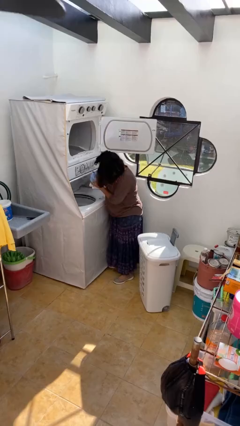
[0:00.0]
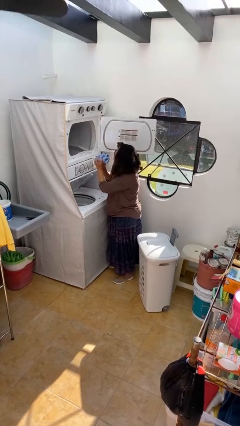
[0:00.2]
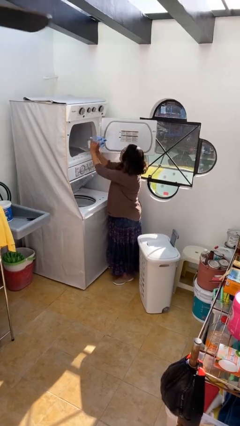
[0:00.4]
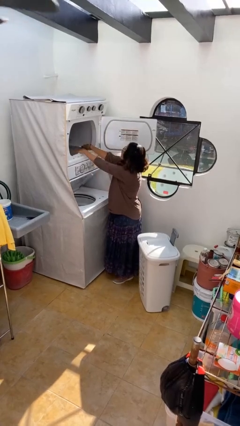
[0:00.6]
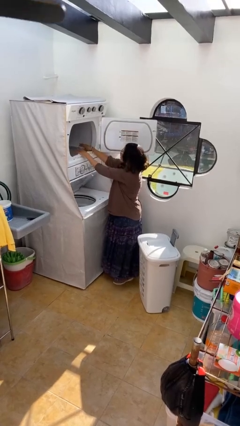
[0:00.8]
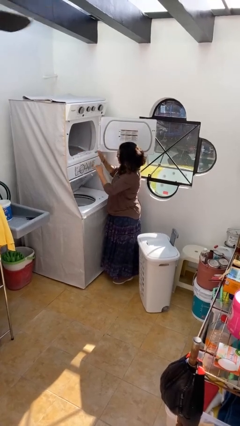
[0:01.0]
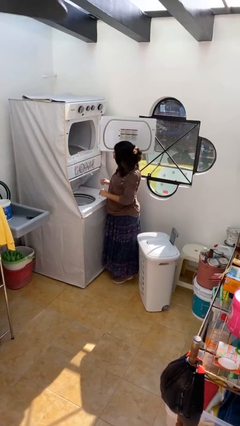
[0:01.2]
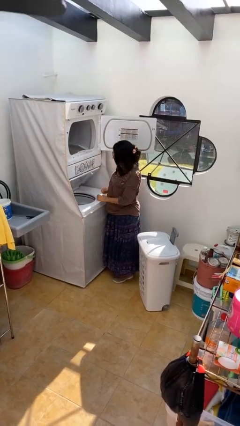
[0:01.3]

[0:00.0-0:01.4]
person loads dryer

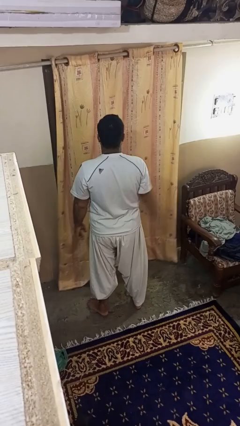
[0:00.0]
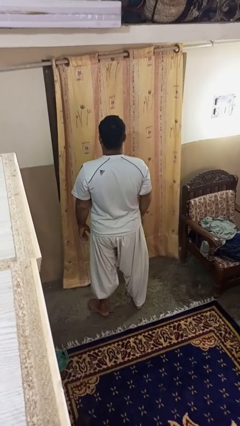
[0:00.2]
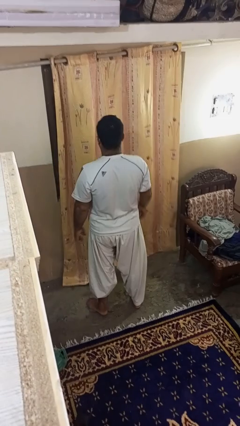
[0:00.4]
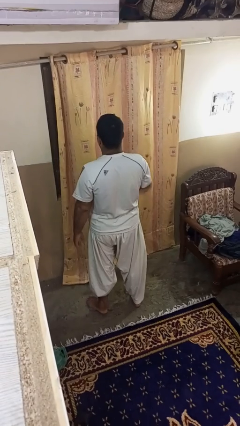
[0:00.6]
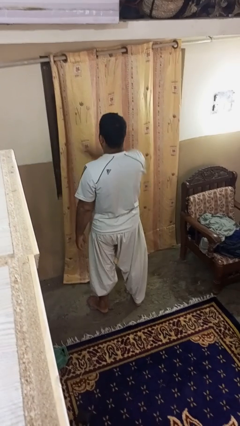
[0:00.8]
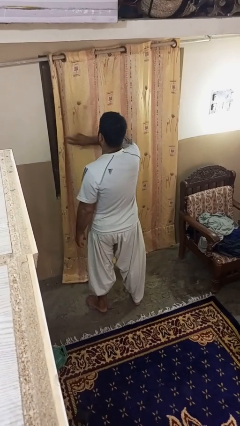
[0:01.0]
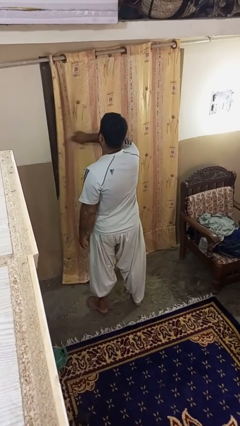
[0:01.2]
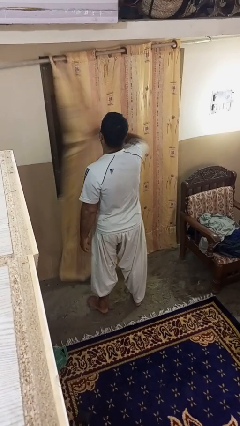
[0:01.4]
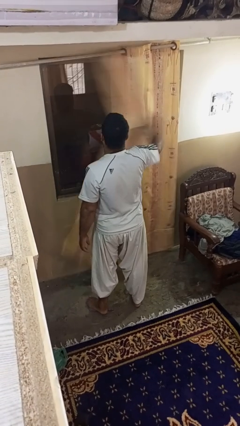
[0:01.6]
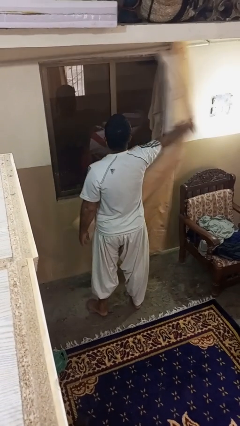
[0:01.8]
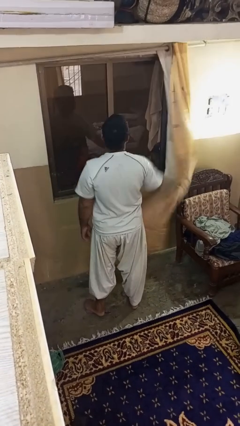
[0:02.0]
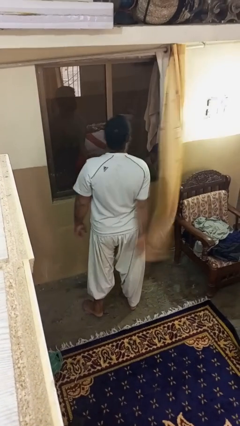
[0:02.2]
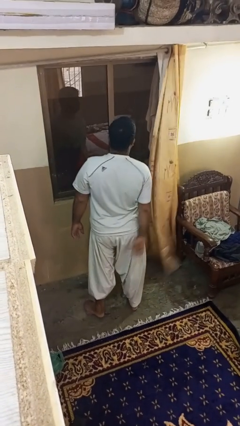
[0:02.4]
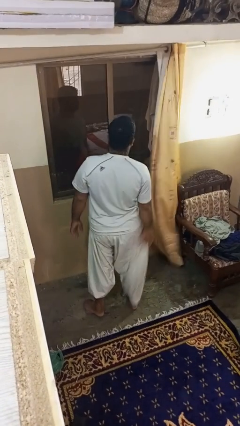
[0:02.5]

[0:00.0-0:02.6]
person opens curtains

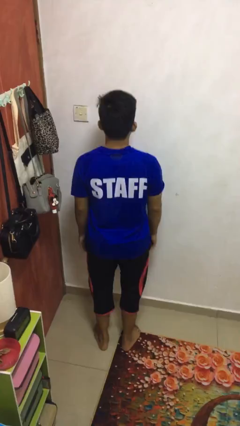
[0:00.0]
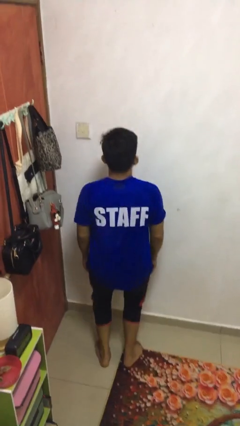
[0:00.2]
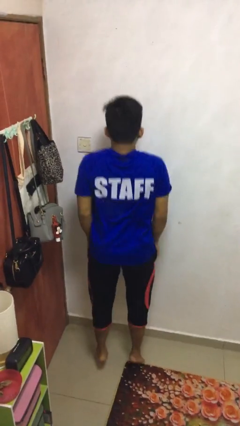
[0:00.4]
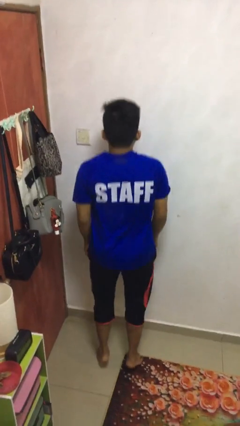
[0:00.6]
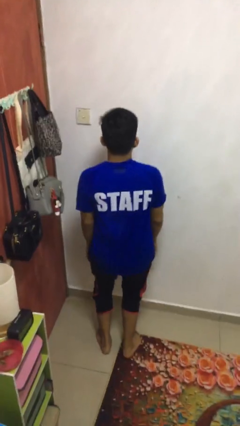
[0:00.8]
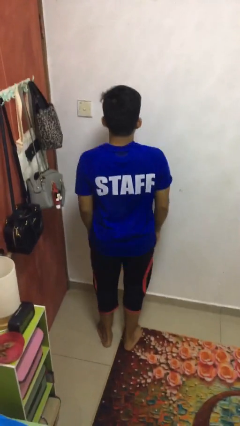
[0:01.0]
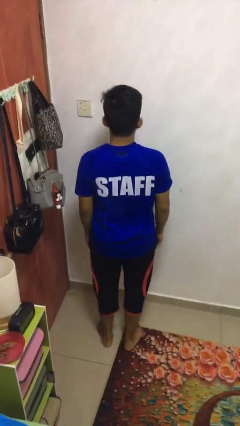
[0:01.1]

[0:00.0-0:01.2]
person jumps

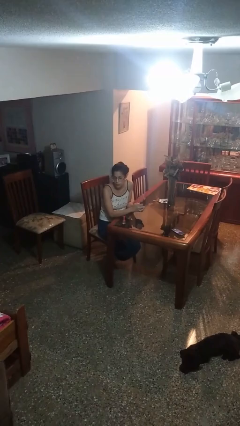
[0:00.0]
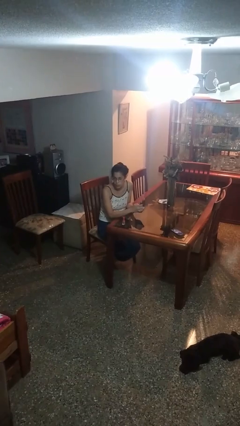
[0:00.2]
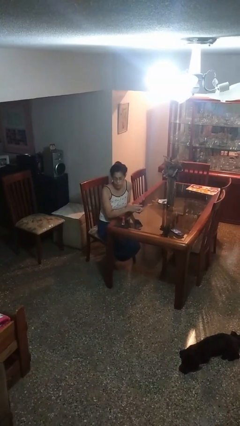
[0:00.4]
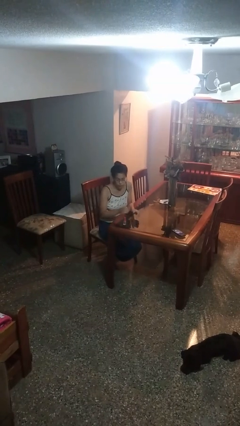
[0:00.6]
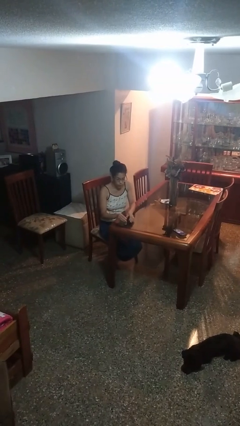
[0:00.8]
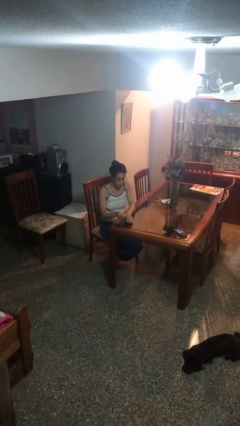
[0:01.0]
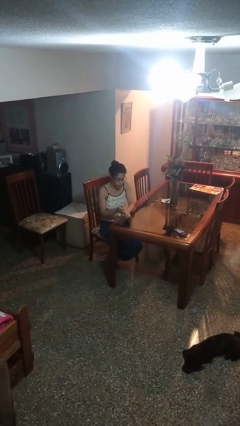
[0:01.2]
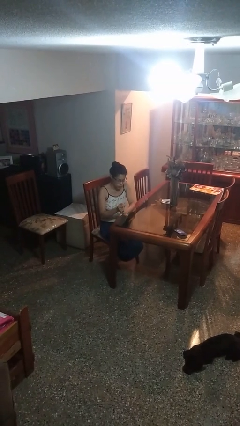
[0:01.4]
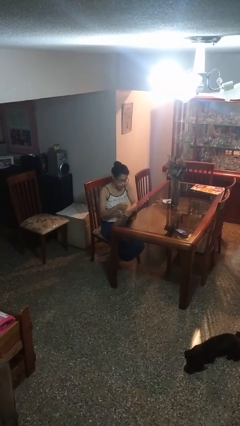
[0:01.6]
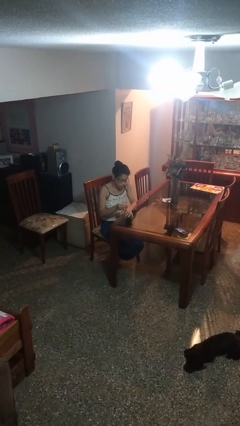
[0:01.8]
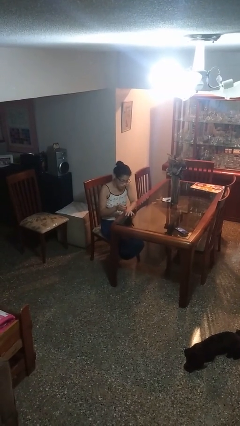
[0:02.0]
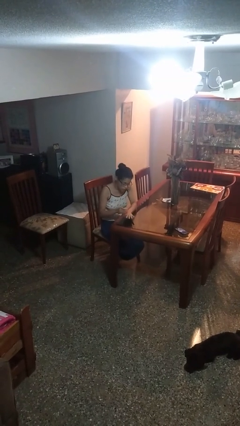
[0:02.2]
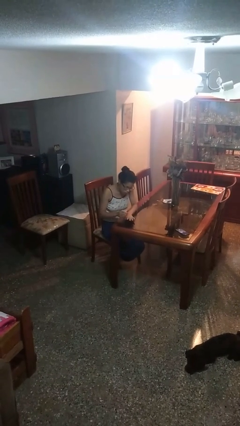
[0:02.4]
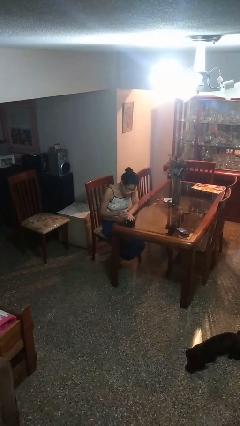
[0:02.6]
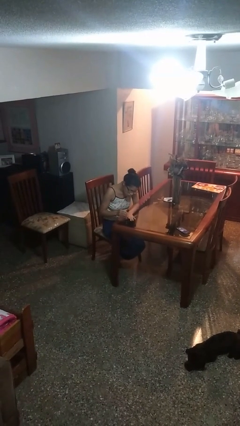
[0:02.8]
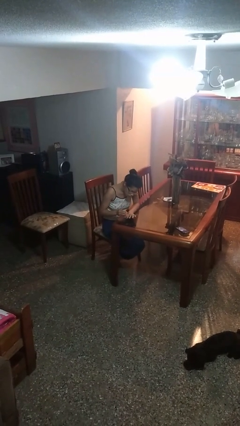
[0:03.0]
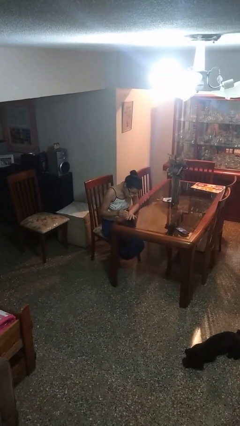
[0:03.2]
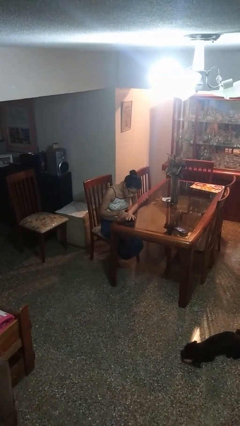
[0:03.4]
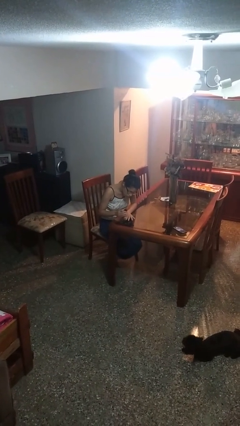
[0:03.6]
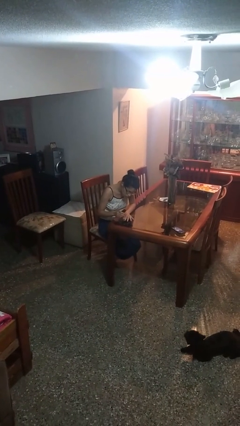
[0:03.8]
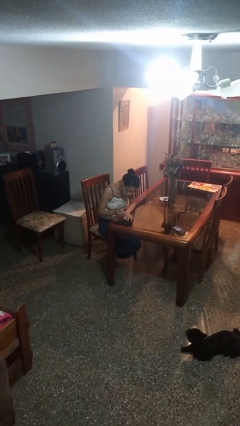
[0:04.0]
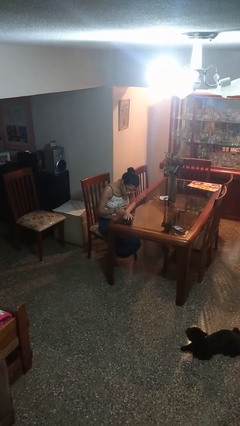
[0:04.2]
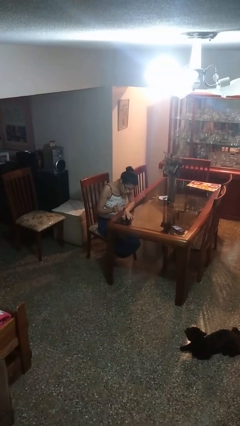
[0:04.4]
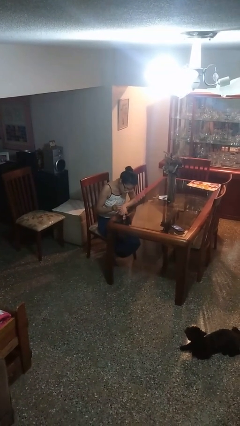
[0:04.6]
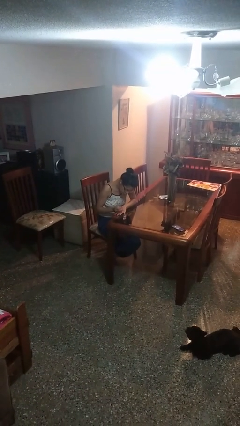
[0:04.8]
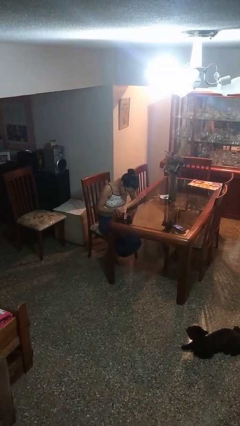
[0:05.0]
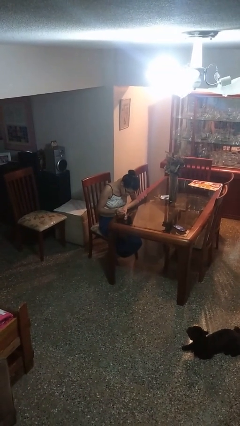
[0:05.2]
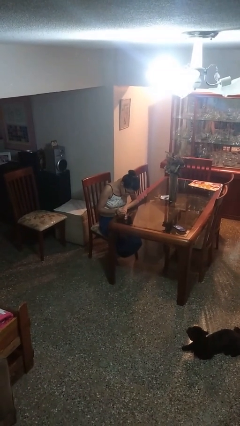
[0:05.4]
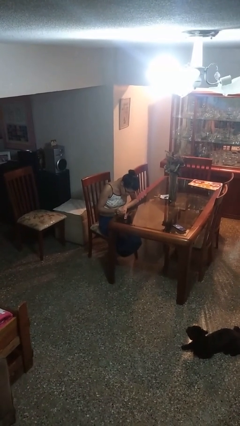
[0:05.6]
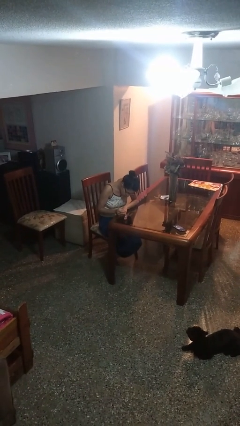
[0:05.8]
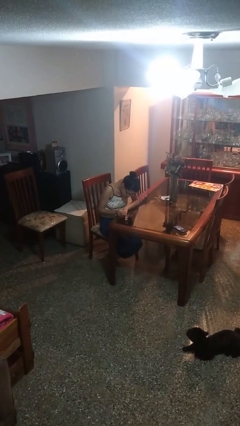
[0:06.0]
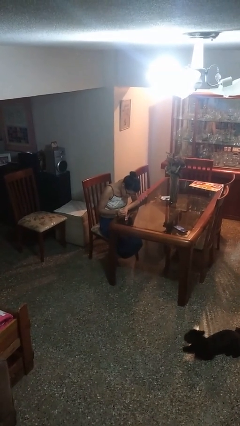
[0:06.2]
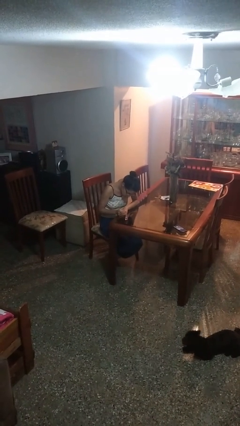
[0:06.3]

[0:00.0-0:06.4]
person paints fingernails

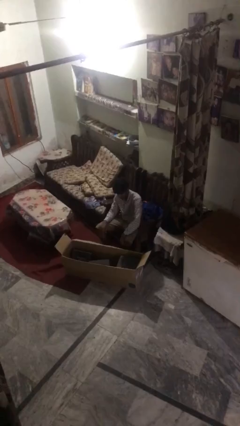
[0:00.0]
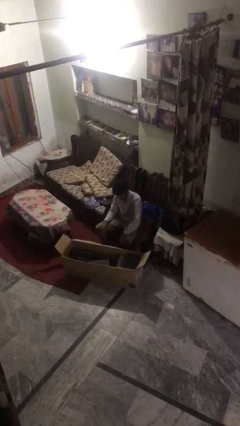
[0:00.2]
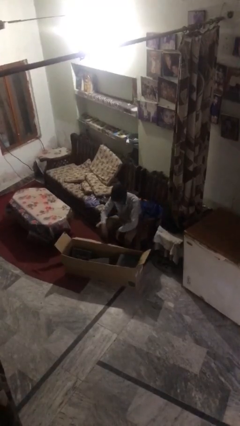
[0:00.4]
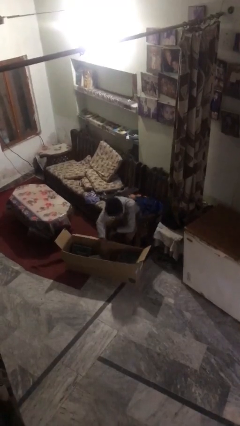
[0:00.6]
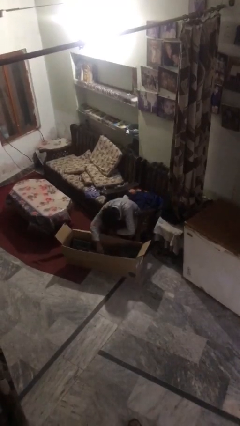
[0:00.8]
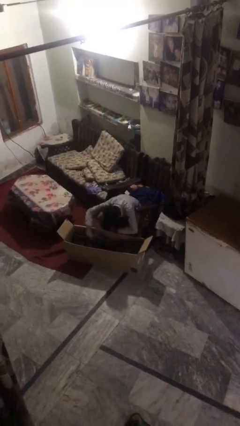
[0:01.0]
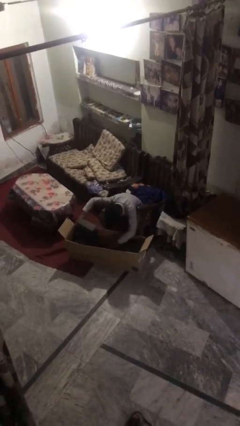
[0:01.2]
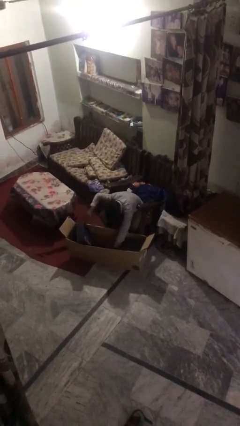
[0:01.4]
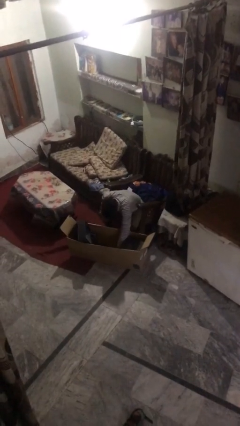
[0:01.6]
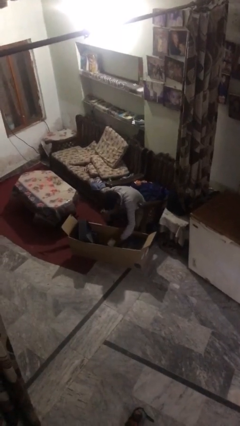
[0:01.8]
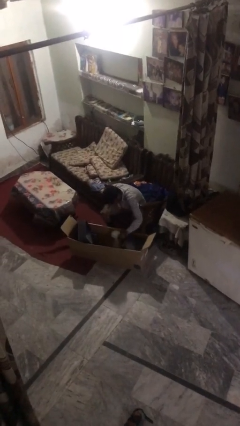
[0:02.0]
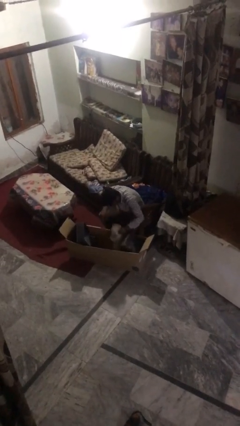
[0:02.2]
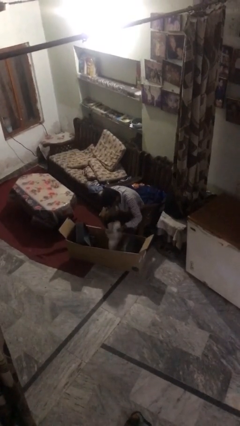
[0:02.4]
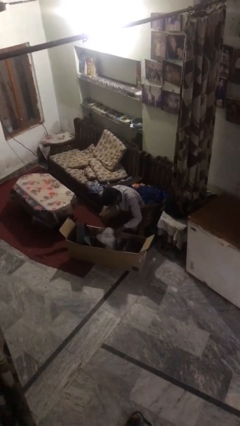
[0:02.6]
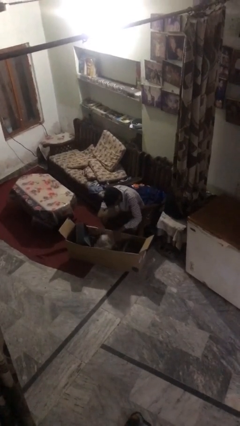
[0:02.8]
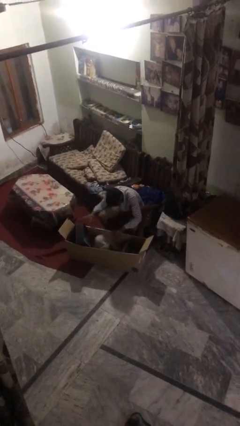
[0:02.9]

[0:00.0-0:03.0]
person searches in box

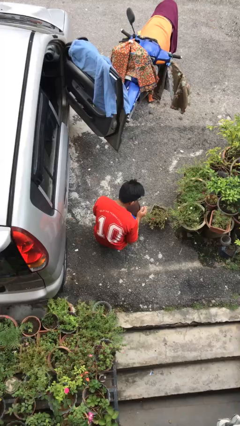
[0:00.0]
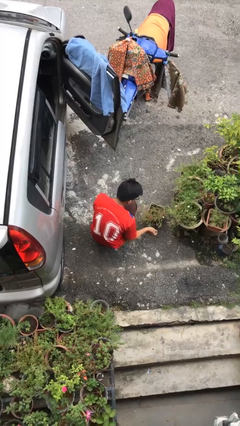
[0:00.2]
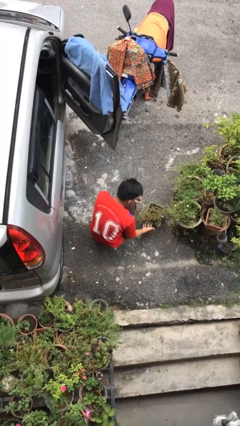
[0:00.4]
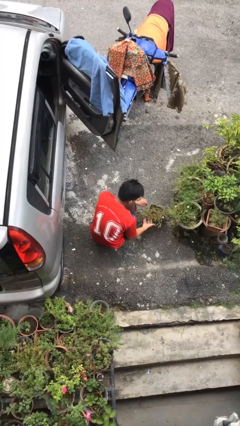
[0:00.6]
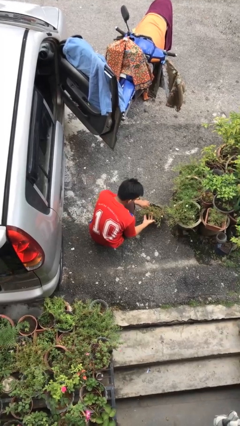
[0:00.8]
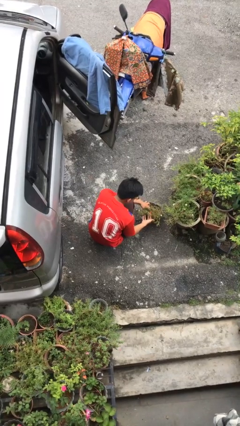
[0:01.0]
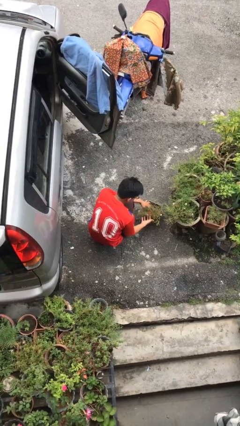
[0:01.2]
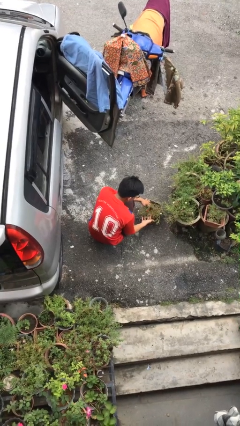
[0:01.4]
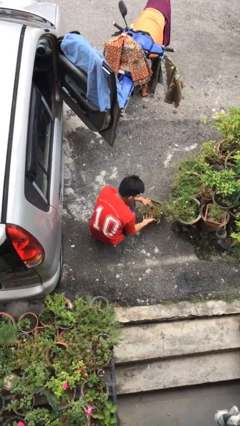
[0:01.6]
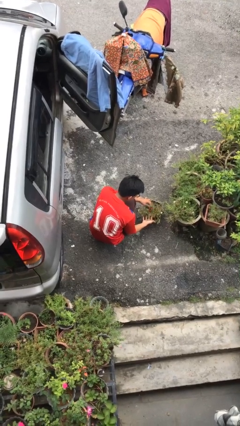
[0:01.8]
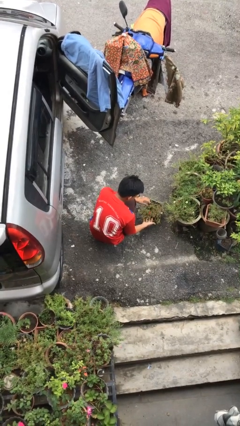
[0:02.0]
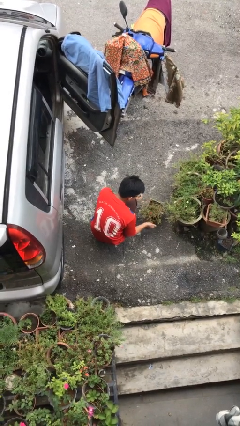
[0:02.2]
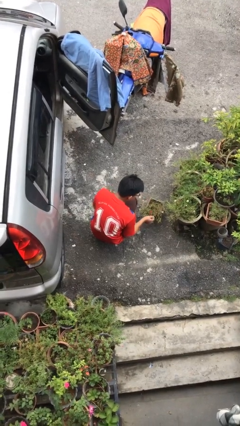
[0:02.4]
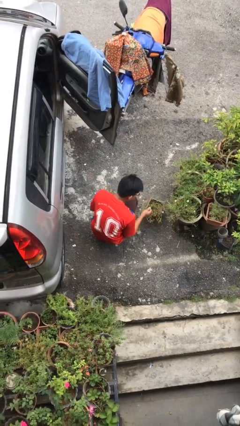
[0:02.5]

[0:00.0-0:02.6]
person arranges flowers in vase
